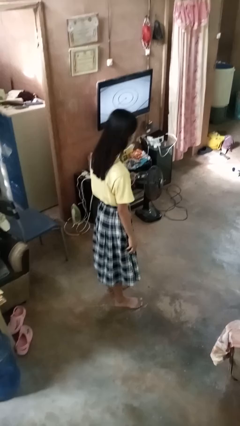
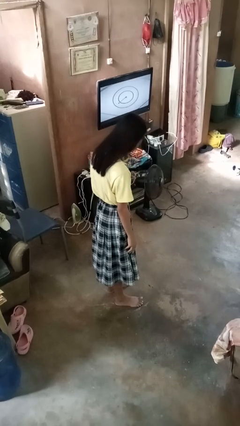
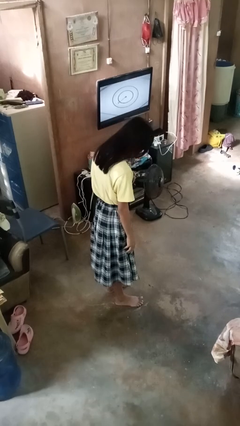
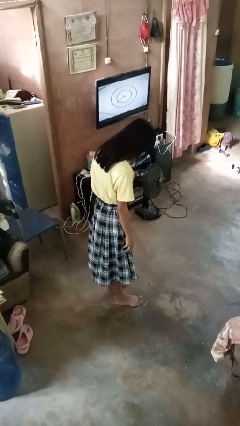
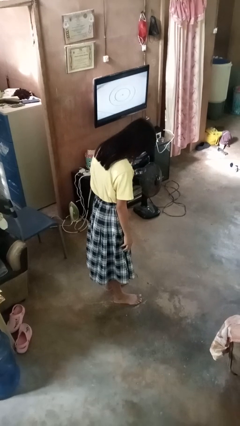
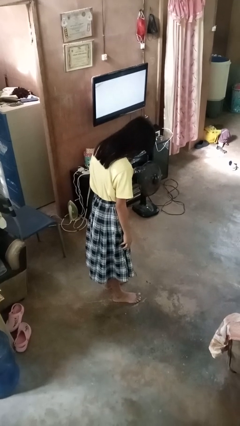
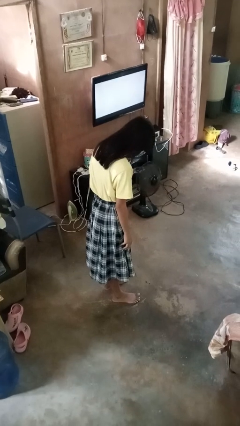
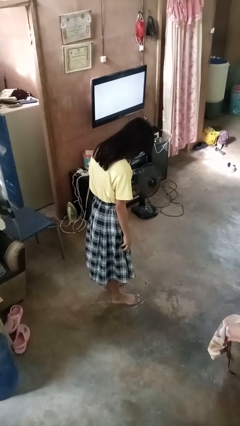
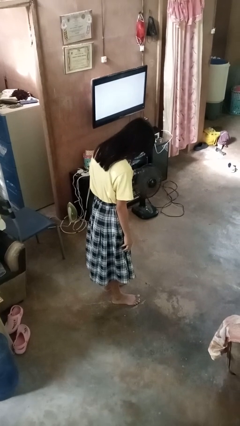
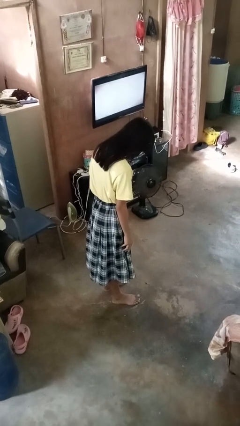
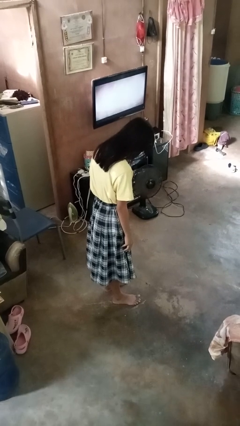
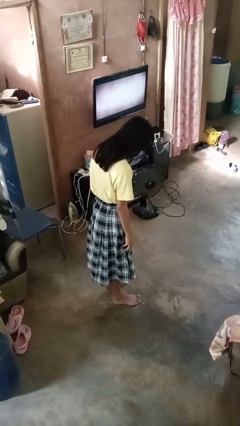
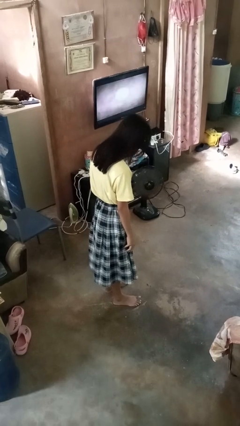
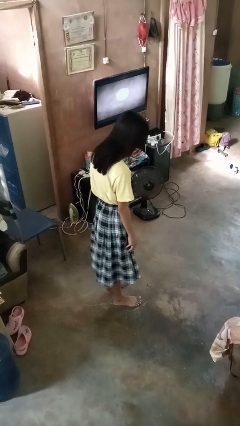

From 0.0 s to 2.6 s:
person bows

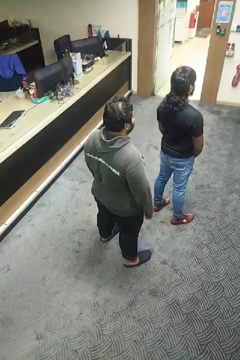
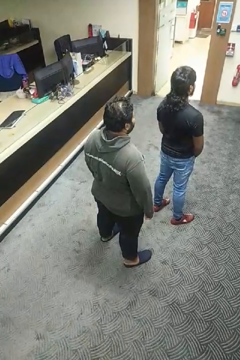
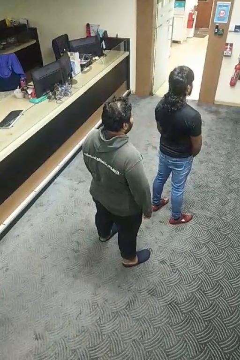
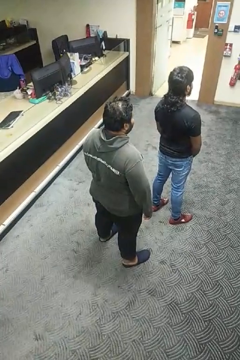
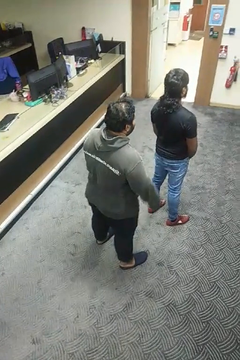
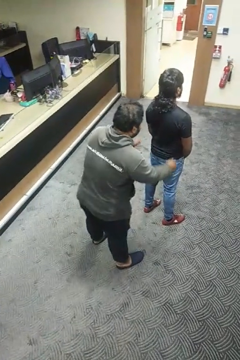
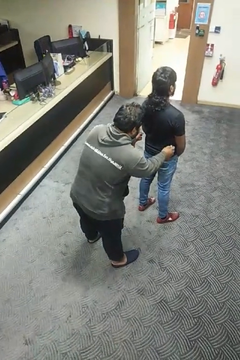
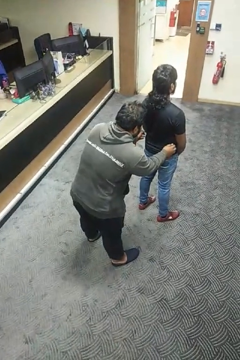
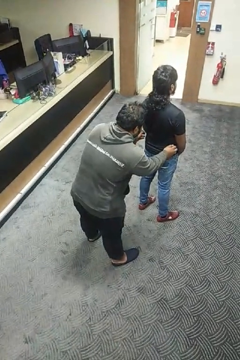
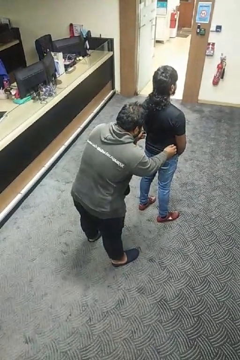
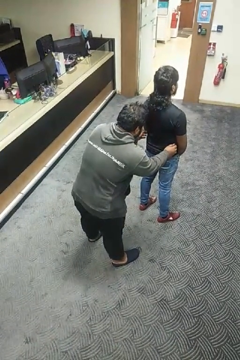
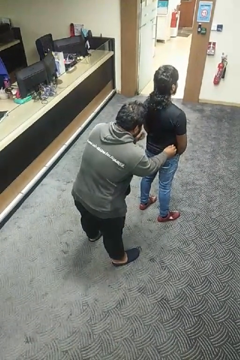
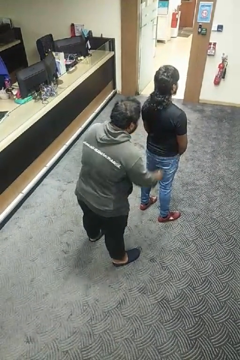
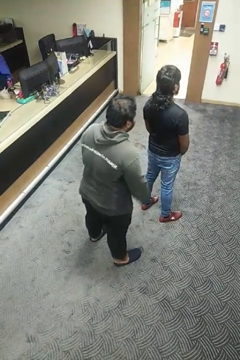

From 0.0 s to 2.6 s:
person tickles person

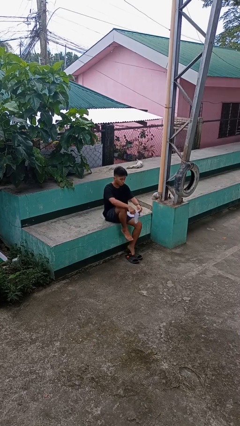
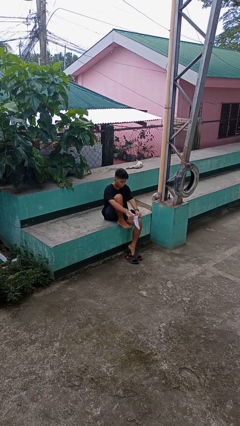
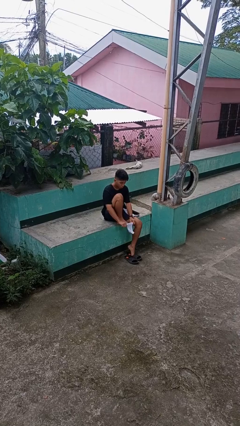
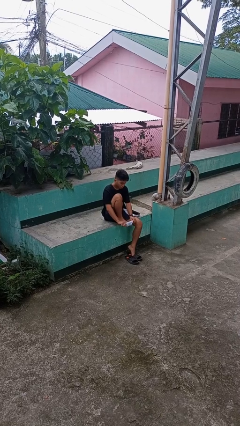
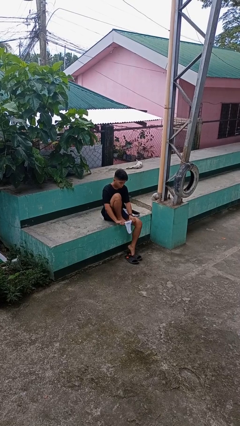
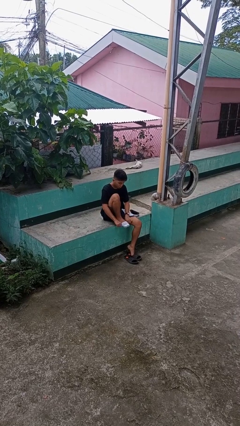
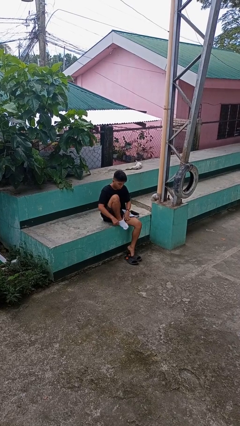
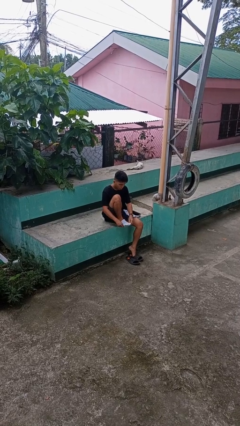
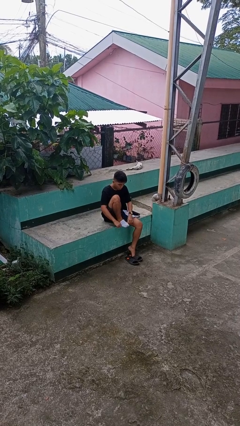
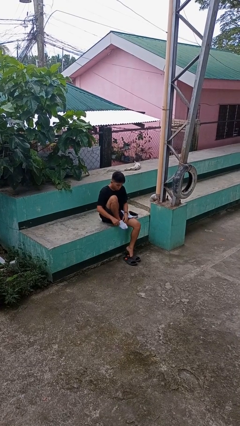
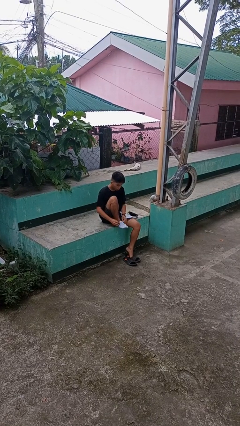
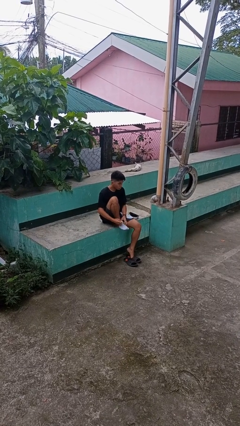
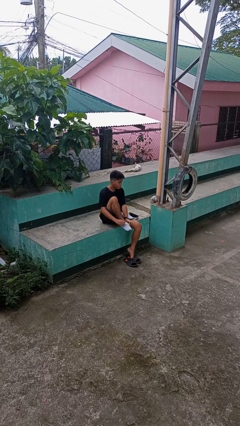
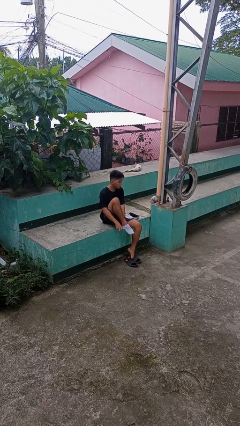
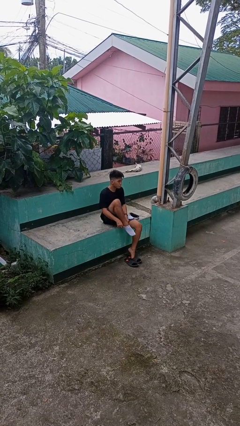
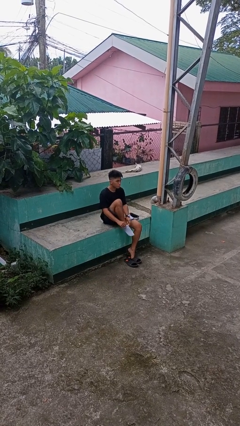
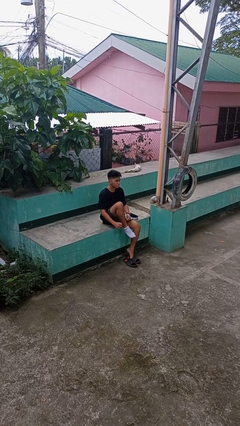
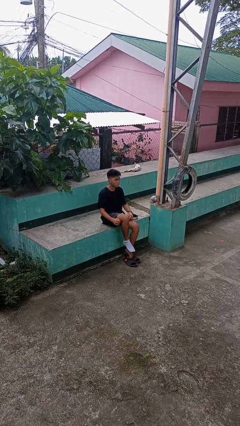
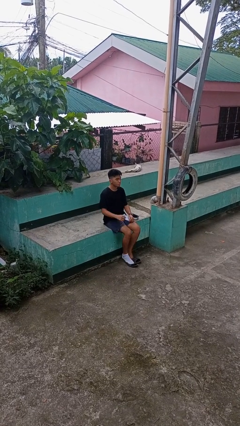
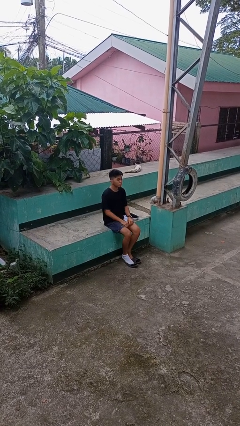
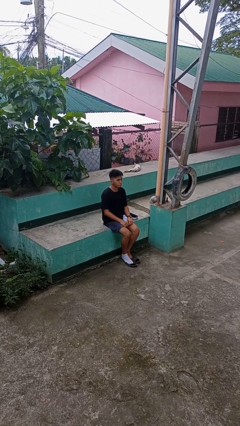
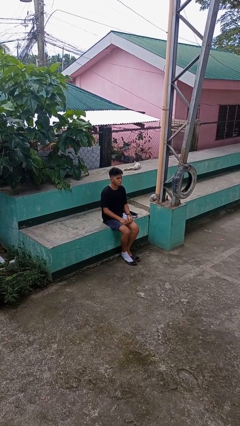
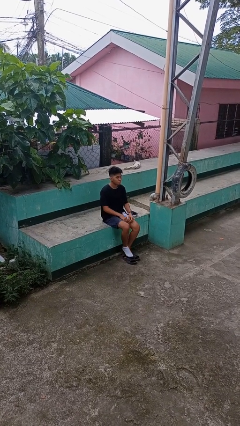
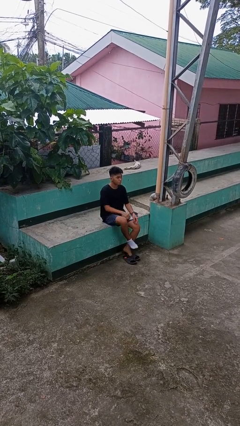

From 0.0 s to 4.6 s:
person puts on socks

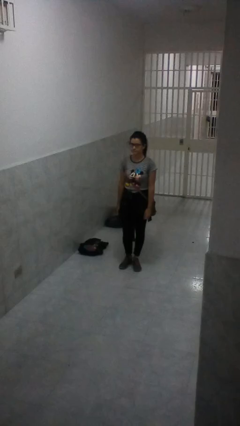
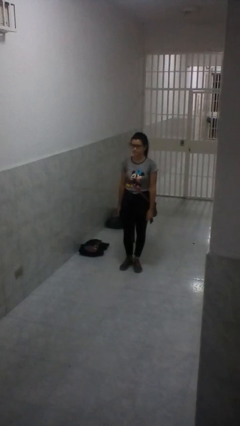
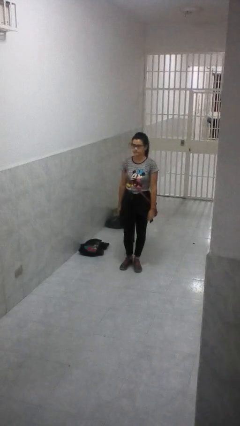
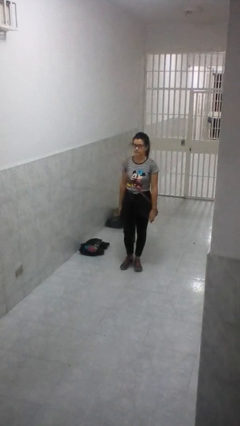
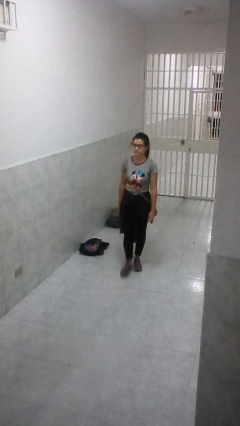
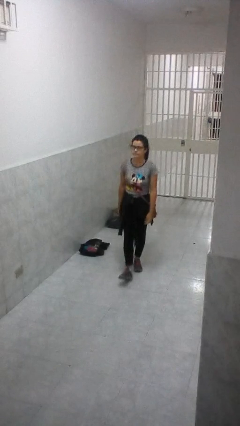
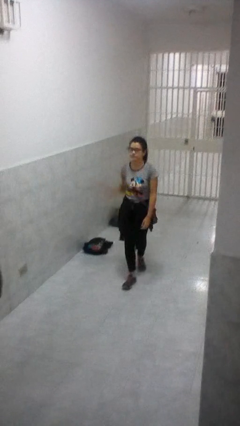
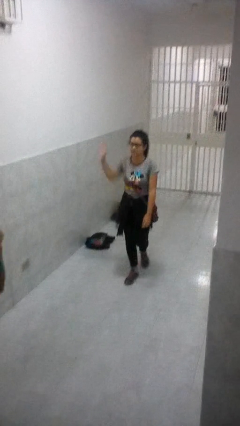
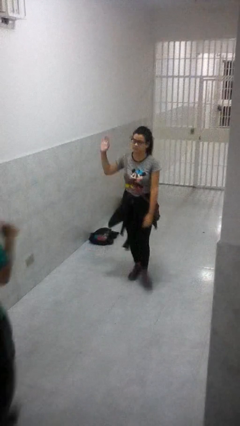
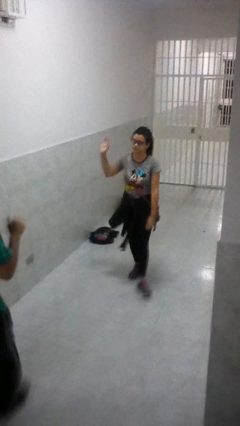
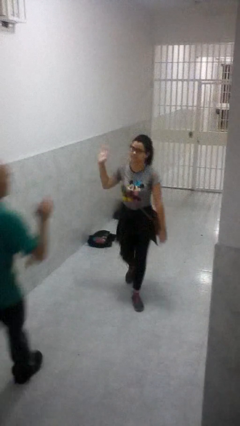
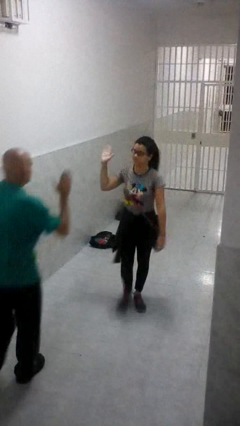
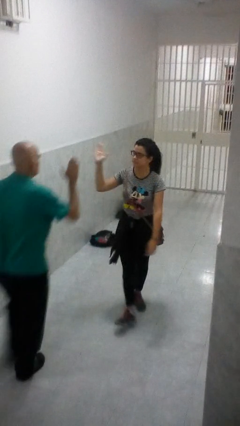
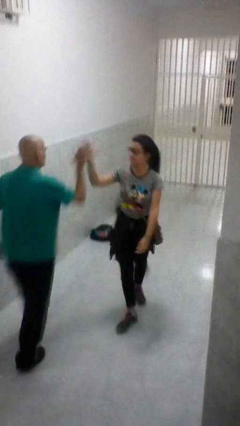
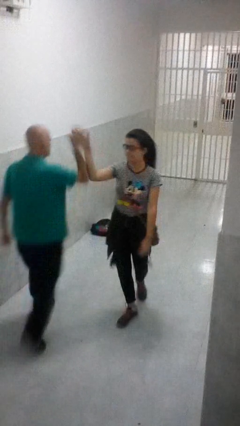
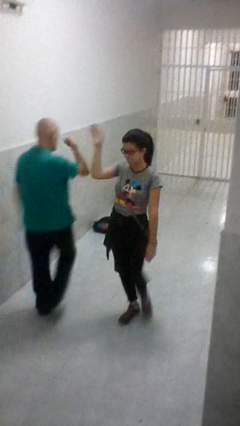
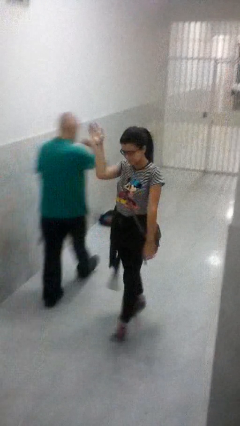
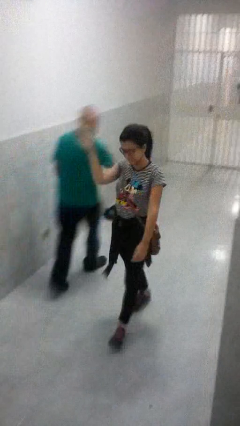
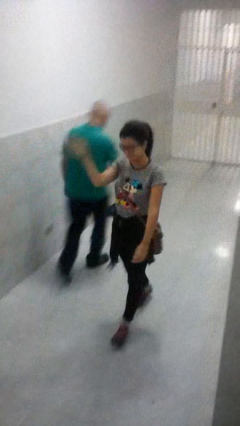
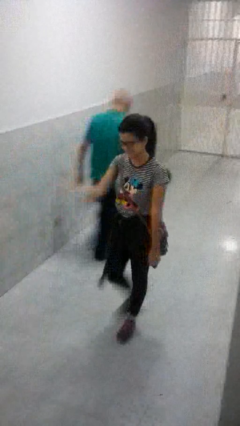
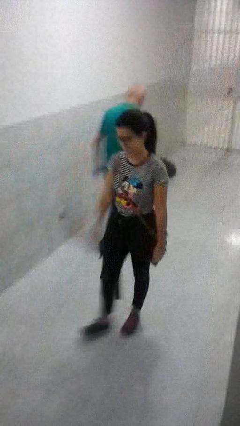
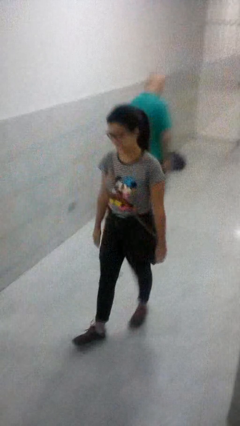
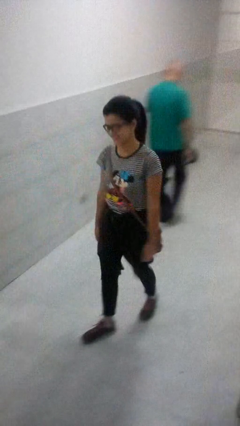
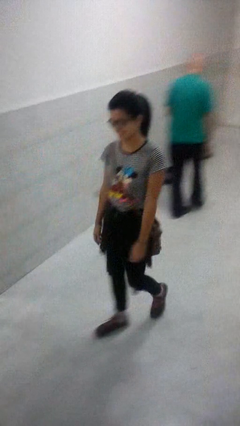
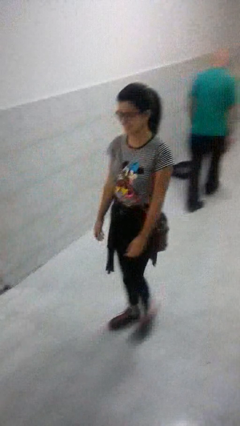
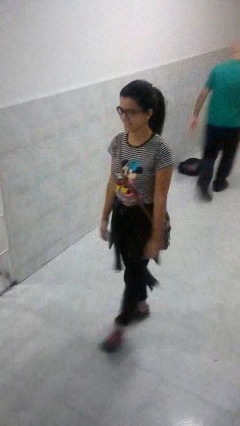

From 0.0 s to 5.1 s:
person highfives hand

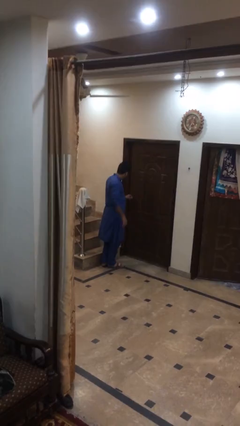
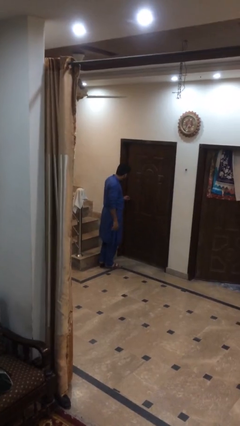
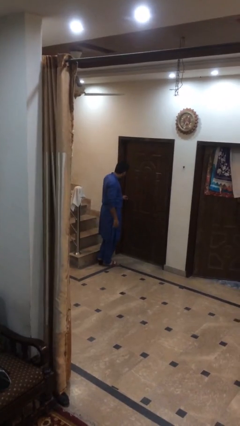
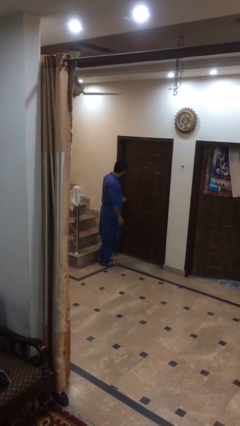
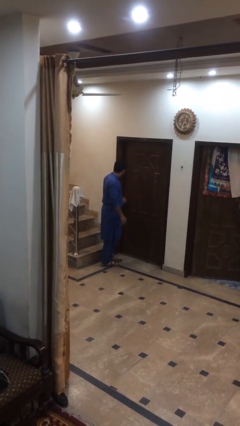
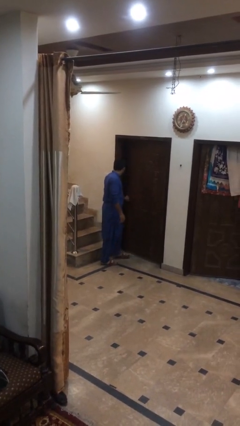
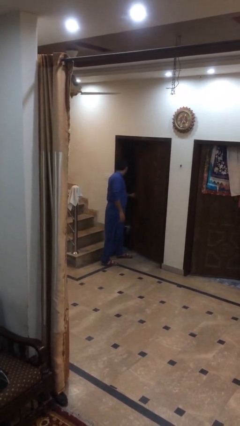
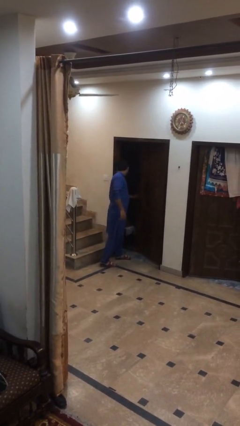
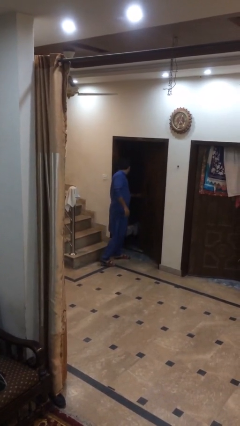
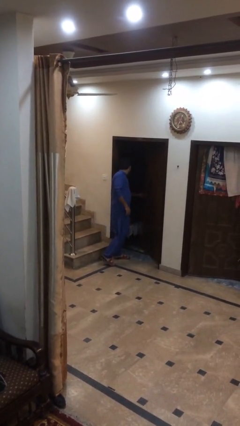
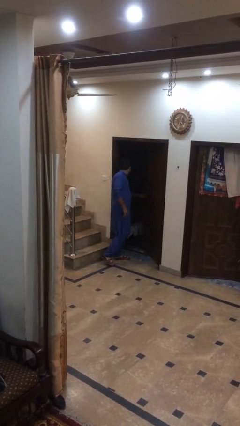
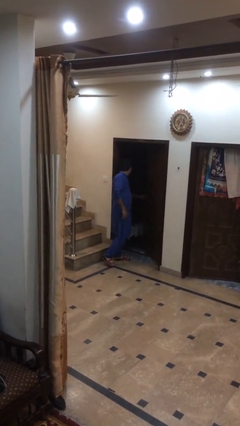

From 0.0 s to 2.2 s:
person opens facility door

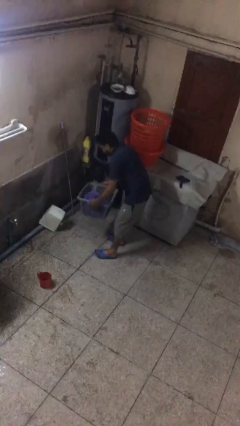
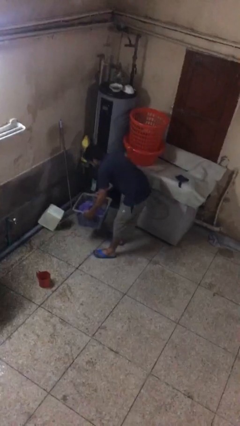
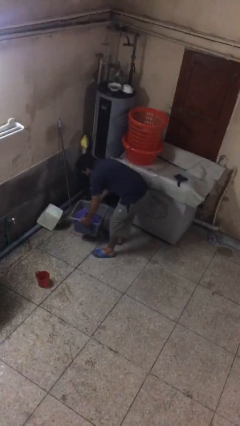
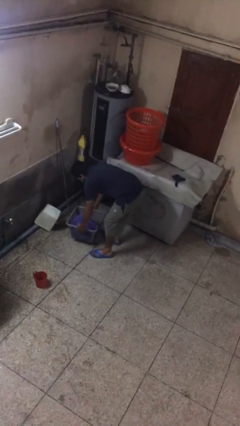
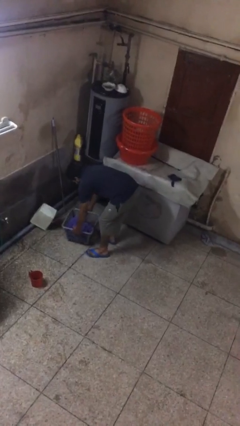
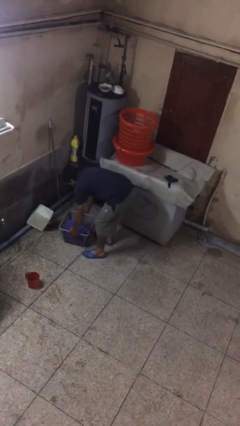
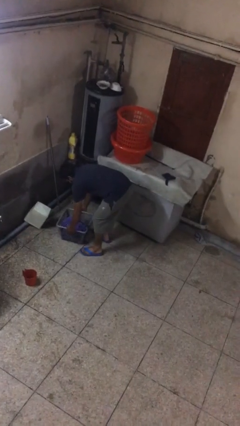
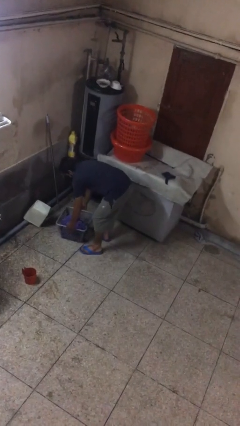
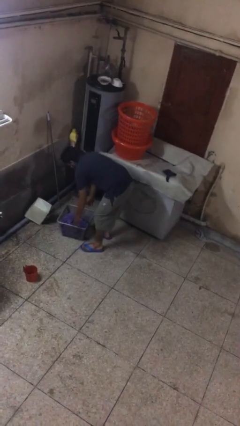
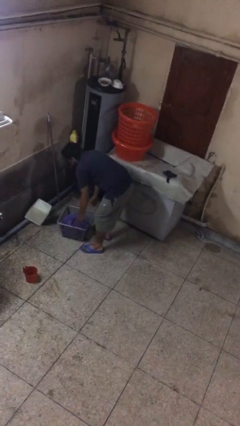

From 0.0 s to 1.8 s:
person puts down object on floor
